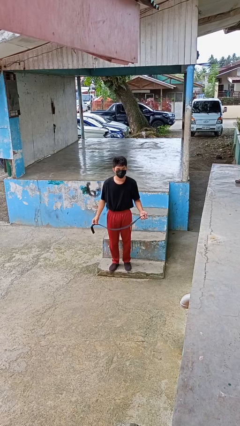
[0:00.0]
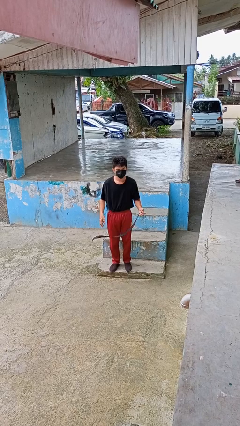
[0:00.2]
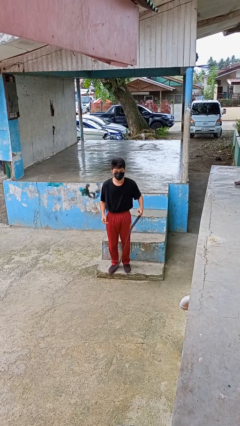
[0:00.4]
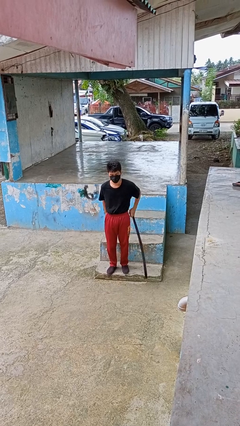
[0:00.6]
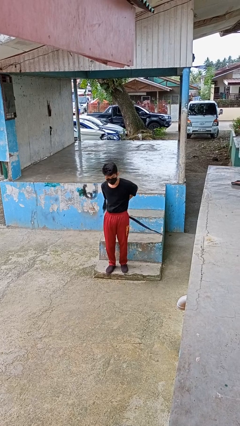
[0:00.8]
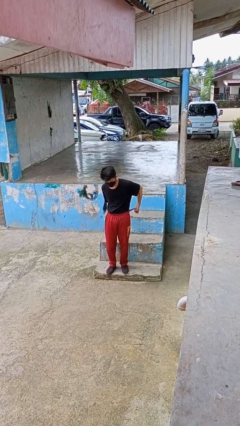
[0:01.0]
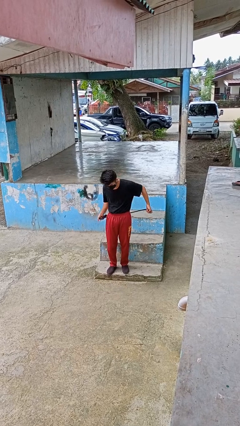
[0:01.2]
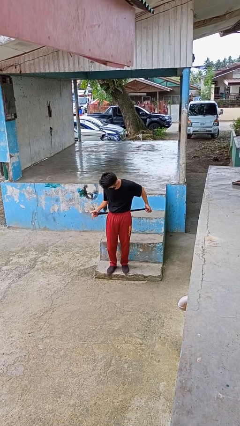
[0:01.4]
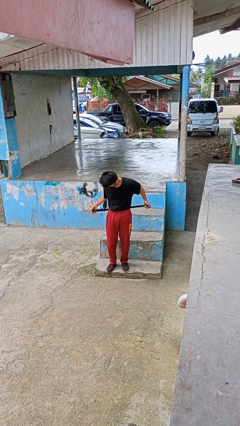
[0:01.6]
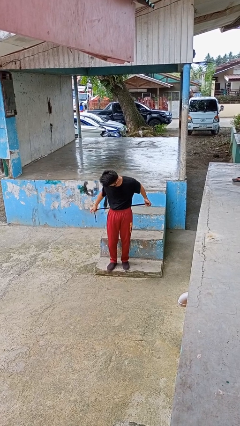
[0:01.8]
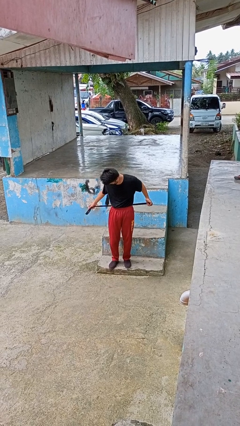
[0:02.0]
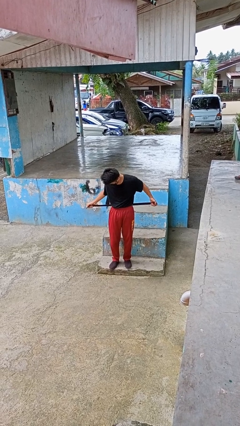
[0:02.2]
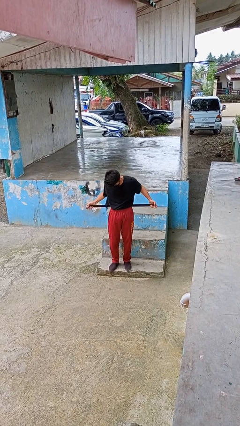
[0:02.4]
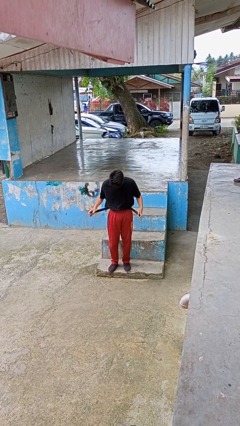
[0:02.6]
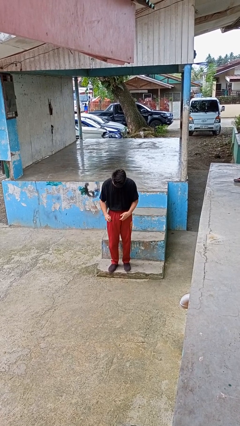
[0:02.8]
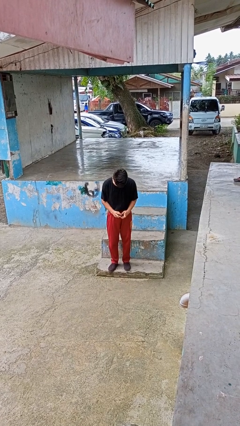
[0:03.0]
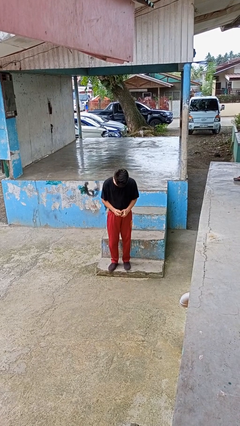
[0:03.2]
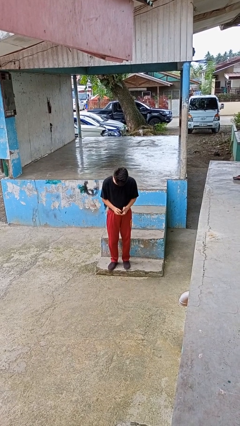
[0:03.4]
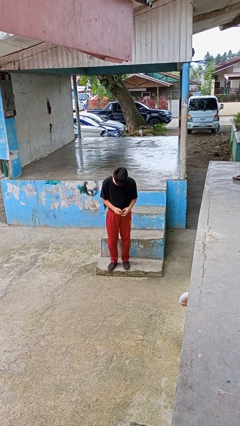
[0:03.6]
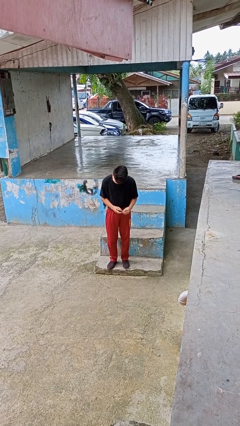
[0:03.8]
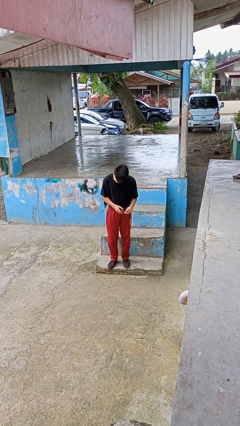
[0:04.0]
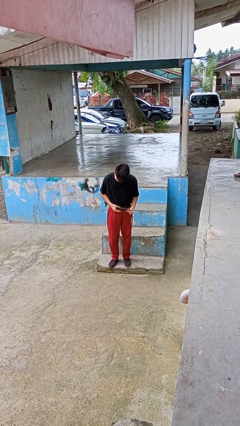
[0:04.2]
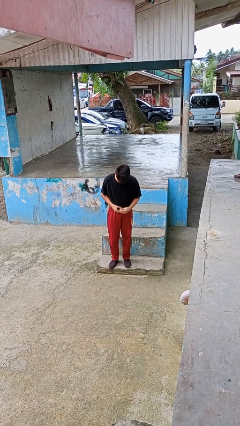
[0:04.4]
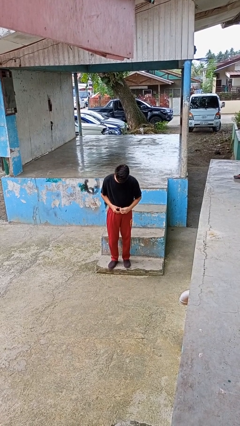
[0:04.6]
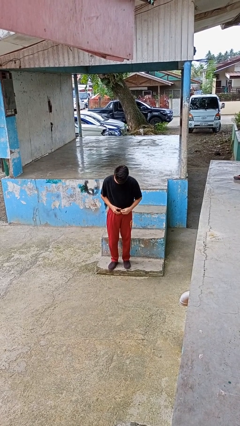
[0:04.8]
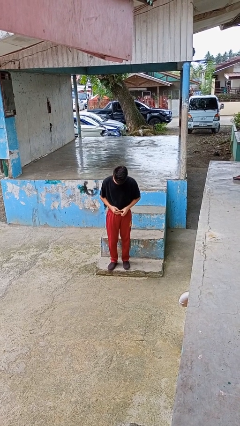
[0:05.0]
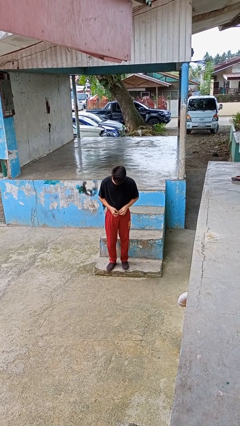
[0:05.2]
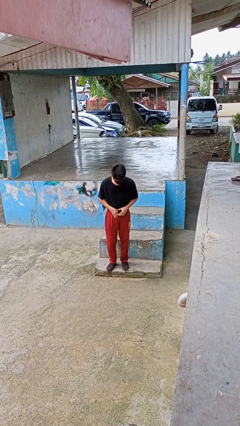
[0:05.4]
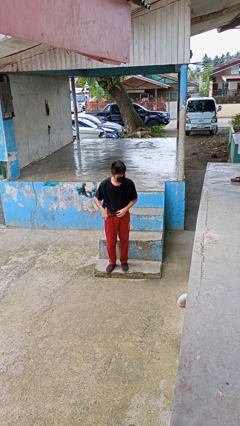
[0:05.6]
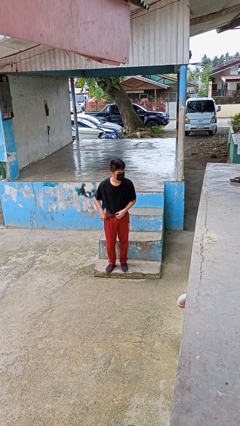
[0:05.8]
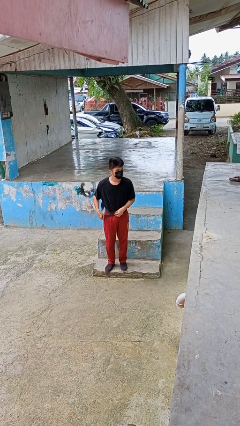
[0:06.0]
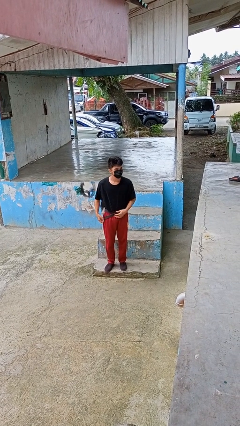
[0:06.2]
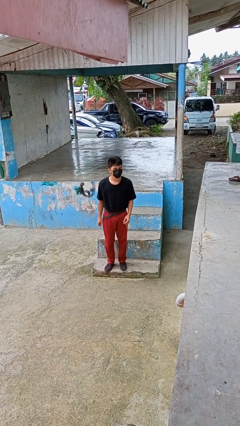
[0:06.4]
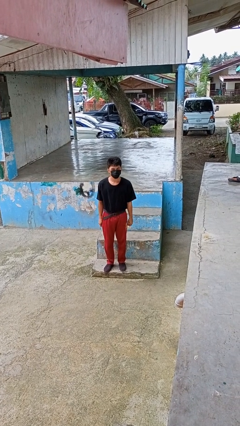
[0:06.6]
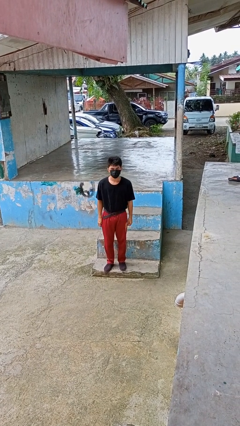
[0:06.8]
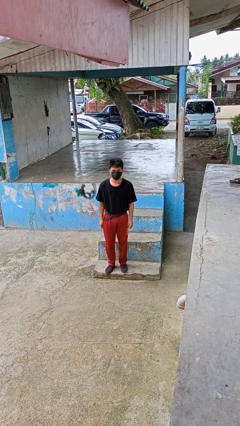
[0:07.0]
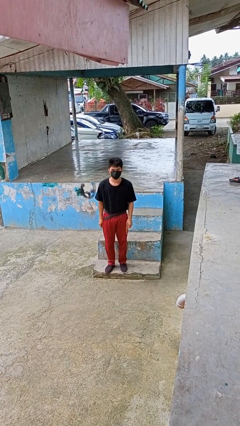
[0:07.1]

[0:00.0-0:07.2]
person puts on belt

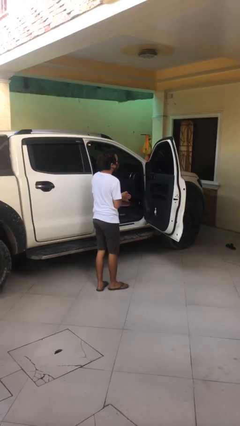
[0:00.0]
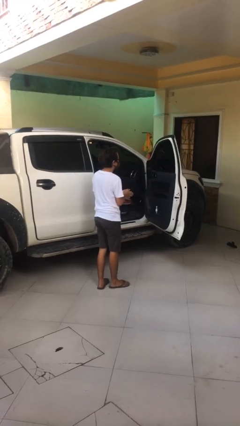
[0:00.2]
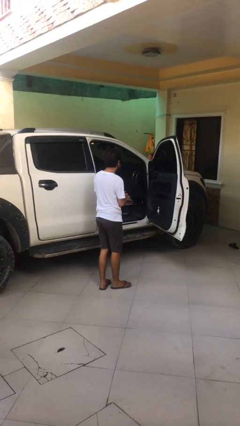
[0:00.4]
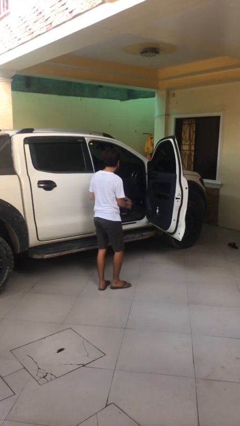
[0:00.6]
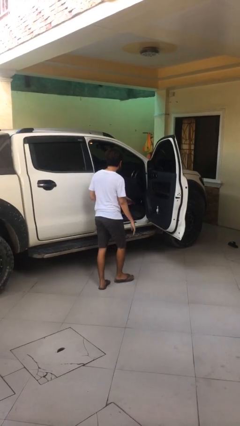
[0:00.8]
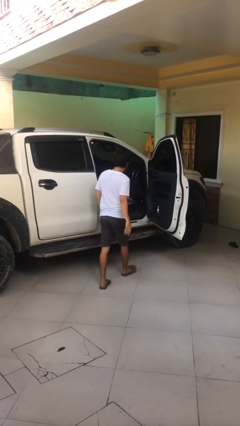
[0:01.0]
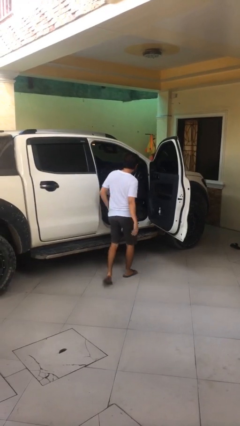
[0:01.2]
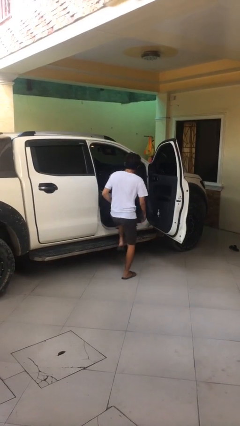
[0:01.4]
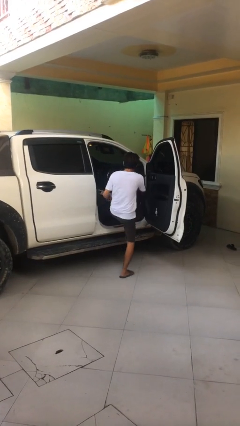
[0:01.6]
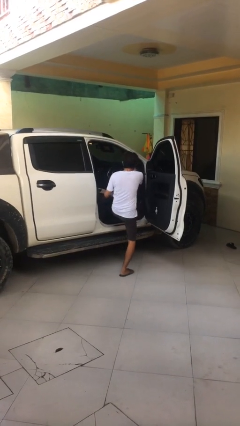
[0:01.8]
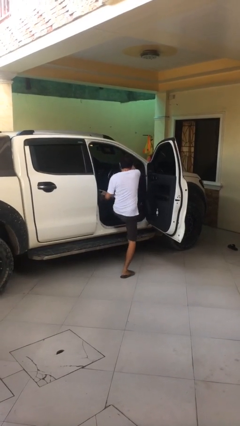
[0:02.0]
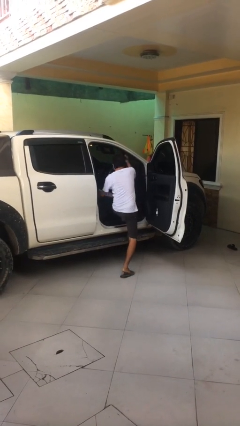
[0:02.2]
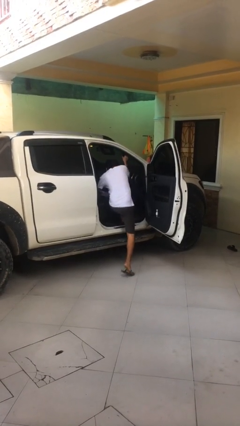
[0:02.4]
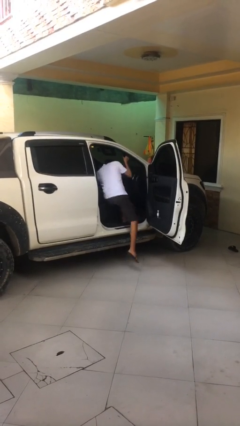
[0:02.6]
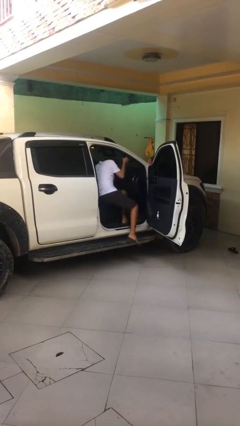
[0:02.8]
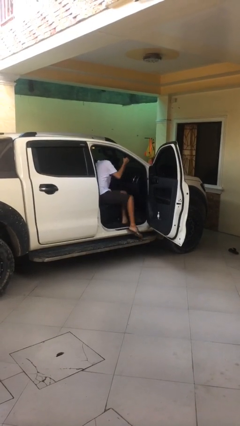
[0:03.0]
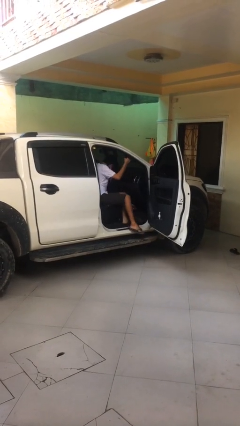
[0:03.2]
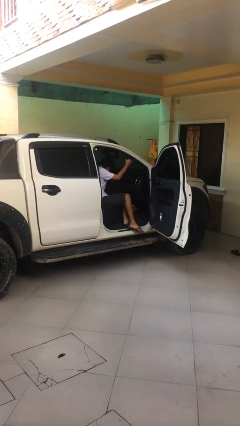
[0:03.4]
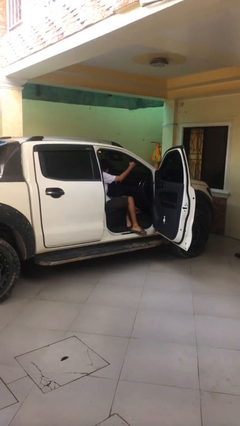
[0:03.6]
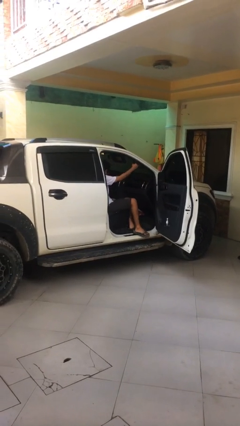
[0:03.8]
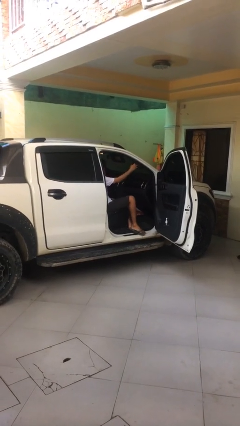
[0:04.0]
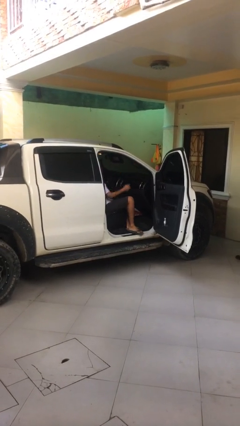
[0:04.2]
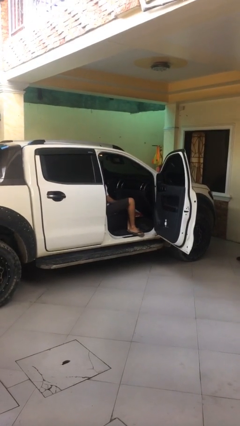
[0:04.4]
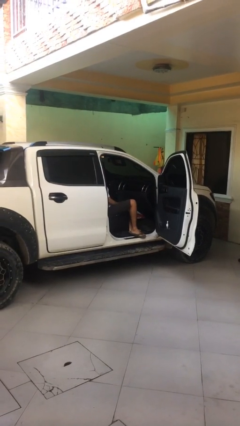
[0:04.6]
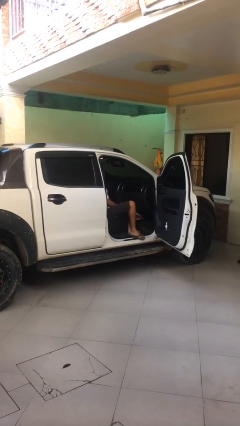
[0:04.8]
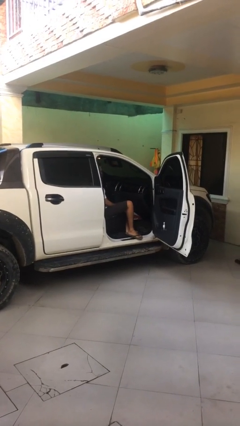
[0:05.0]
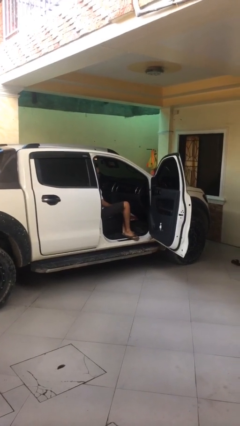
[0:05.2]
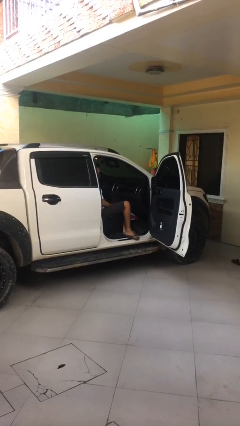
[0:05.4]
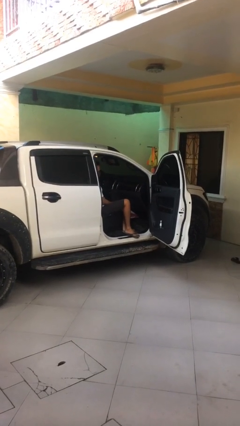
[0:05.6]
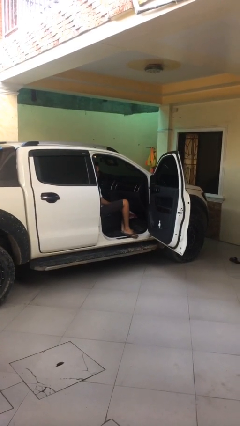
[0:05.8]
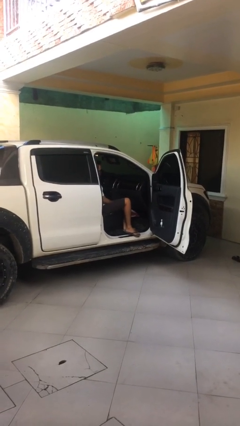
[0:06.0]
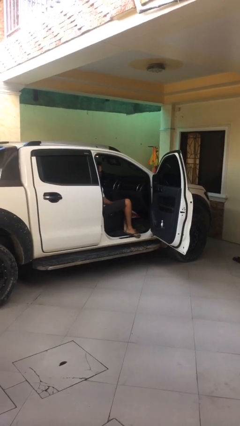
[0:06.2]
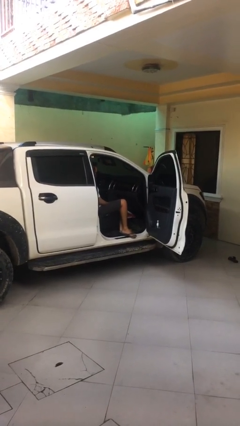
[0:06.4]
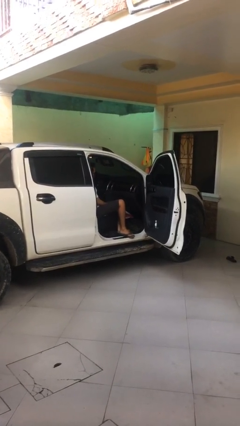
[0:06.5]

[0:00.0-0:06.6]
person enters car

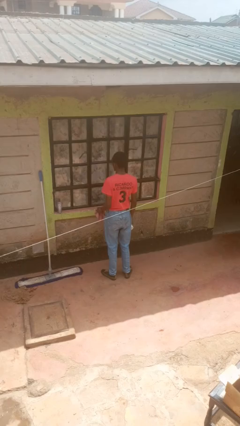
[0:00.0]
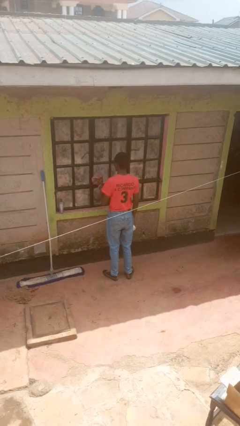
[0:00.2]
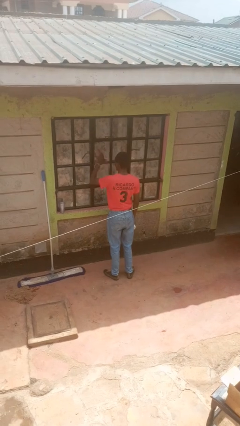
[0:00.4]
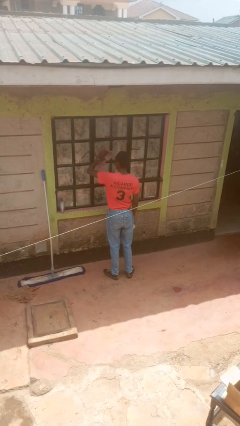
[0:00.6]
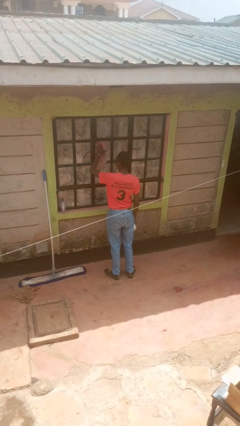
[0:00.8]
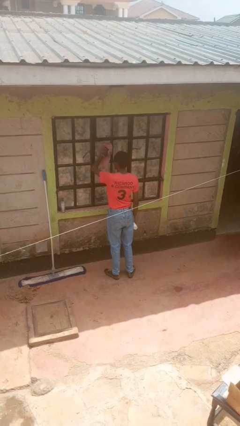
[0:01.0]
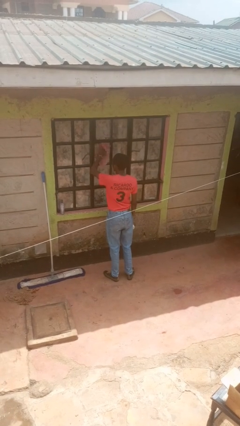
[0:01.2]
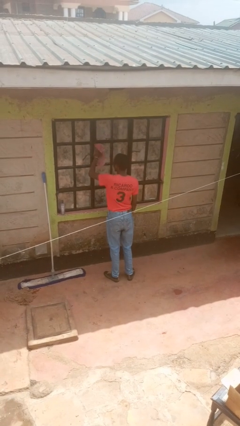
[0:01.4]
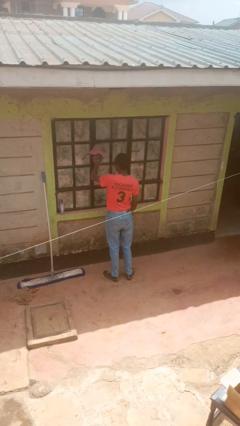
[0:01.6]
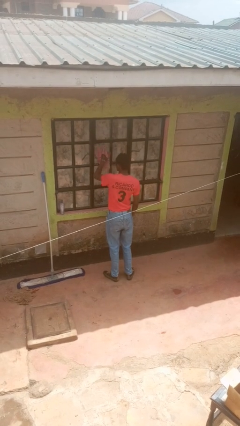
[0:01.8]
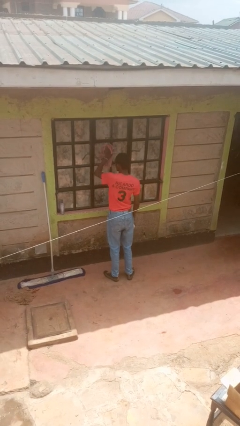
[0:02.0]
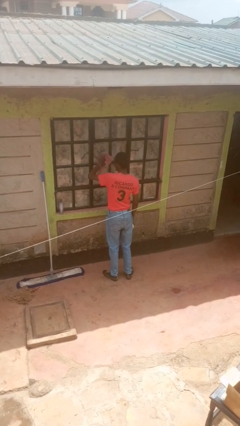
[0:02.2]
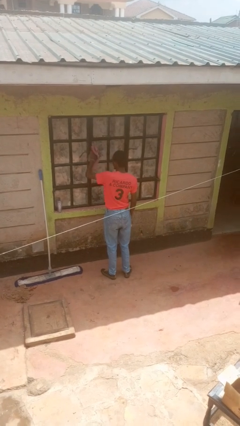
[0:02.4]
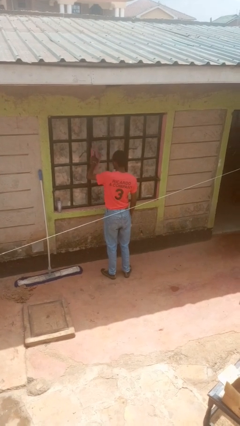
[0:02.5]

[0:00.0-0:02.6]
person washes window

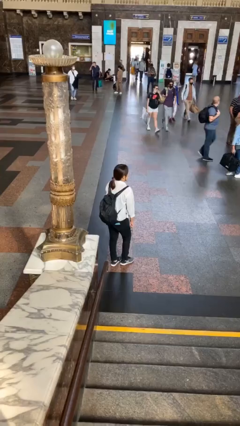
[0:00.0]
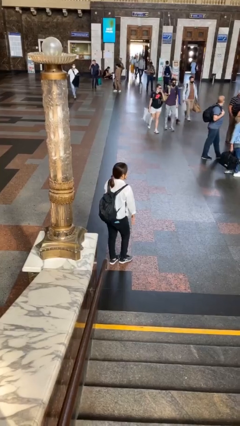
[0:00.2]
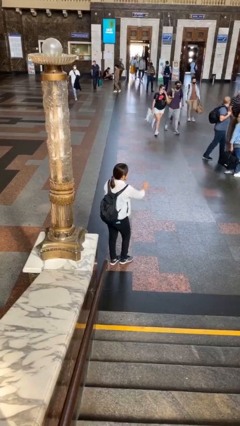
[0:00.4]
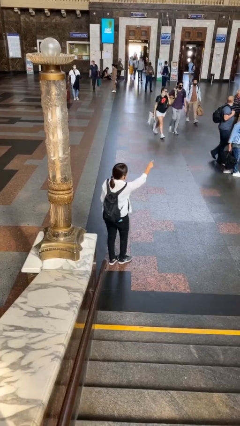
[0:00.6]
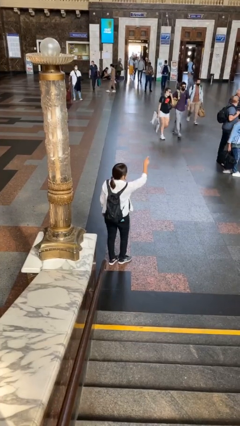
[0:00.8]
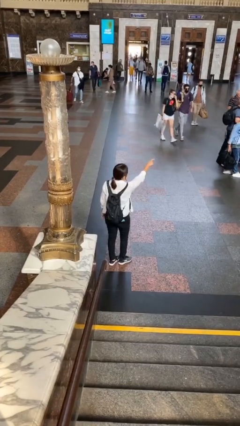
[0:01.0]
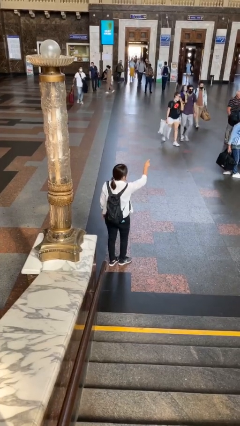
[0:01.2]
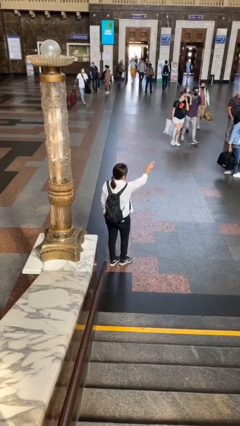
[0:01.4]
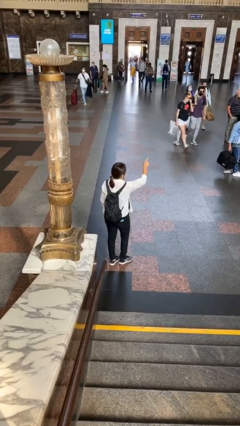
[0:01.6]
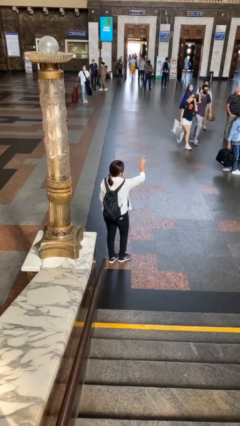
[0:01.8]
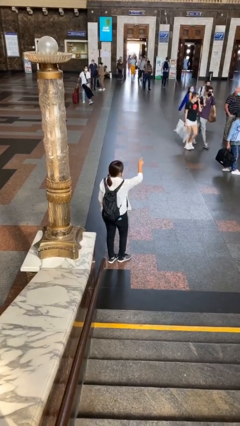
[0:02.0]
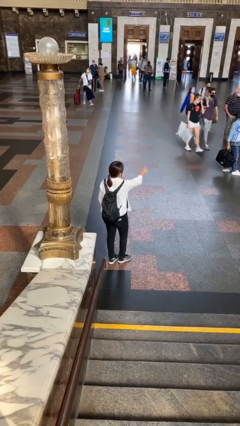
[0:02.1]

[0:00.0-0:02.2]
person points at person
